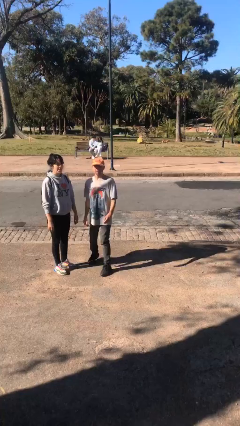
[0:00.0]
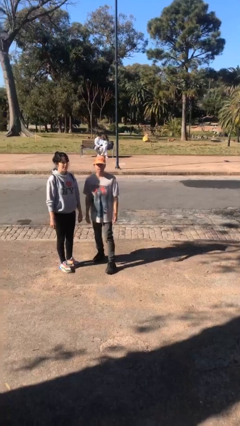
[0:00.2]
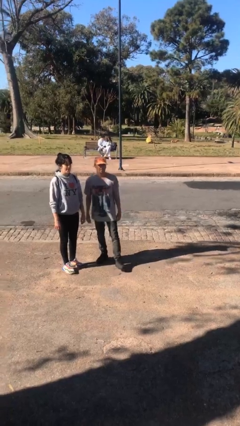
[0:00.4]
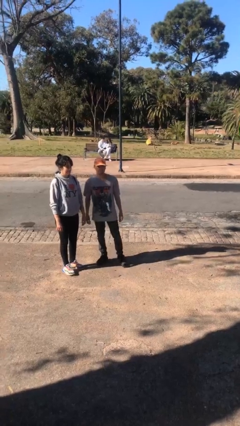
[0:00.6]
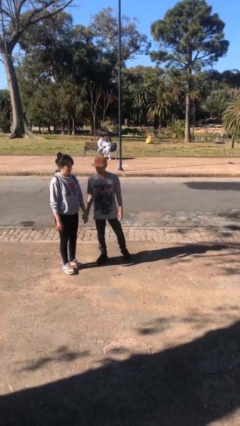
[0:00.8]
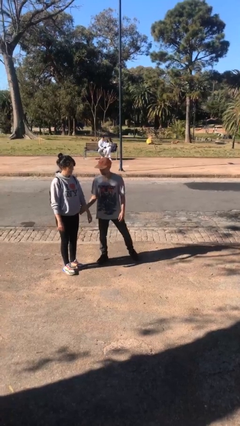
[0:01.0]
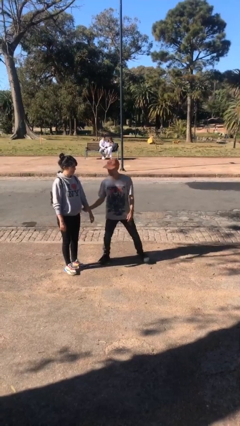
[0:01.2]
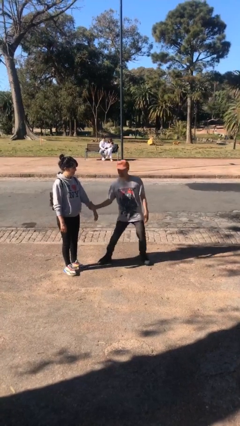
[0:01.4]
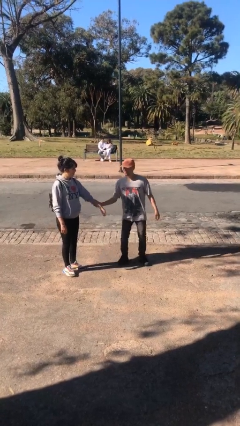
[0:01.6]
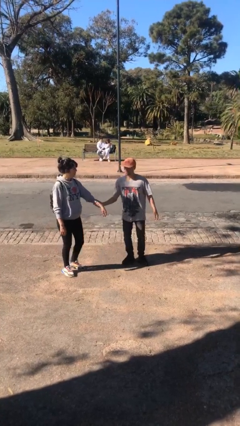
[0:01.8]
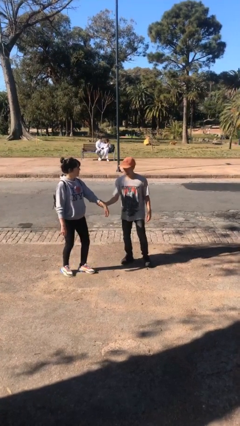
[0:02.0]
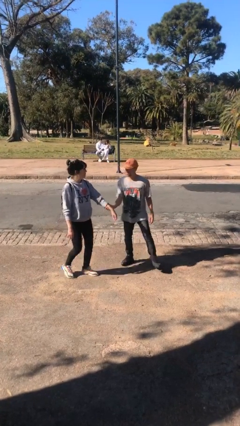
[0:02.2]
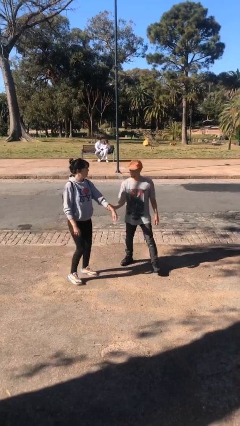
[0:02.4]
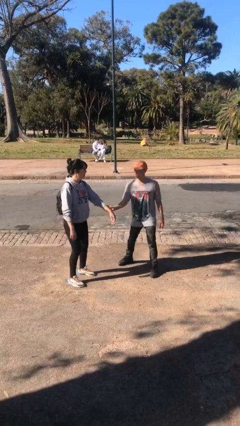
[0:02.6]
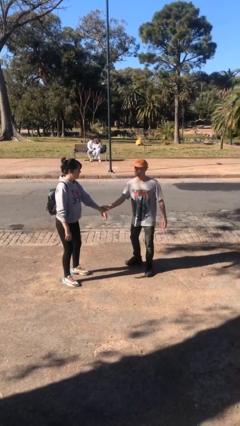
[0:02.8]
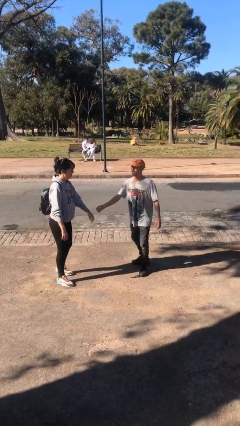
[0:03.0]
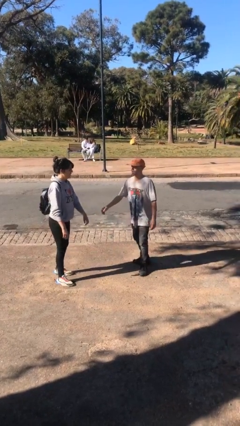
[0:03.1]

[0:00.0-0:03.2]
person grabs person by forearm

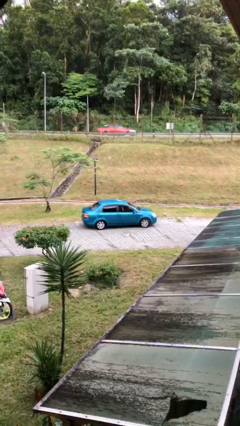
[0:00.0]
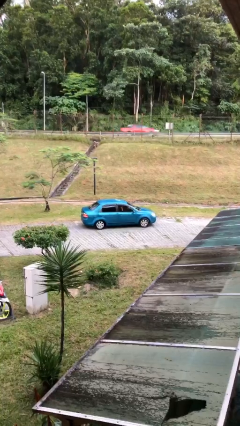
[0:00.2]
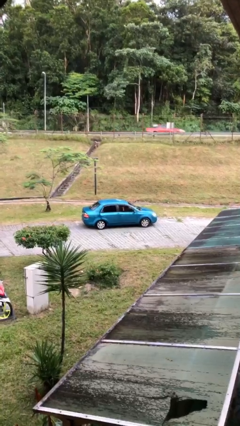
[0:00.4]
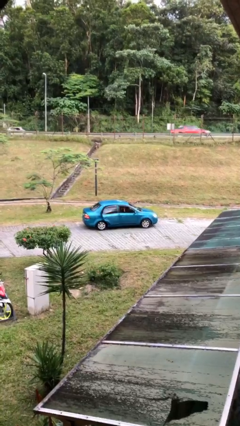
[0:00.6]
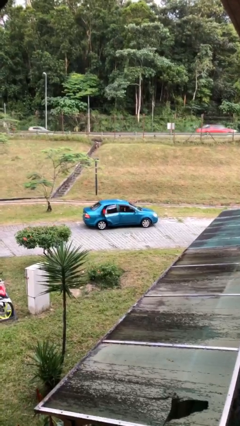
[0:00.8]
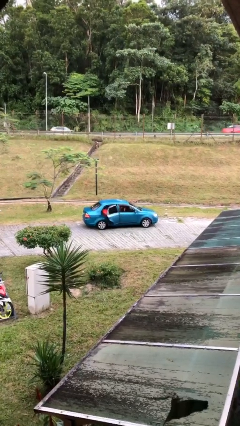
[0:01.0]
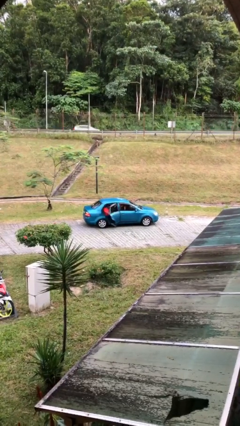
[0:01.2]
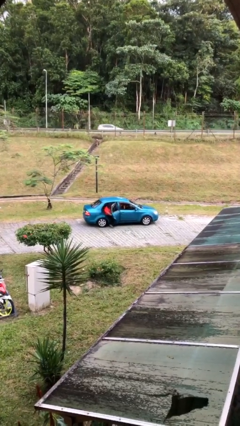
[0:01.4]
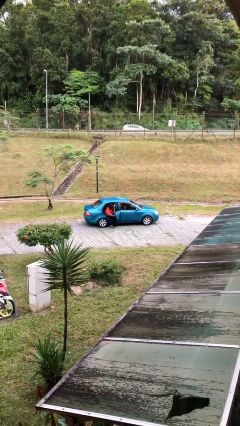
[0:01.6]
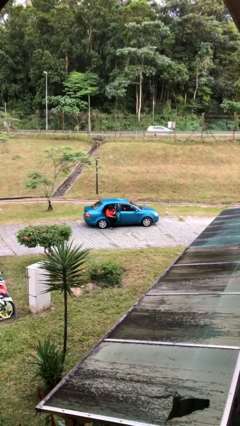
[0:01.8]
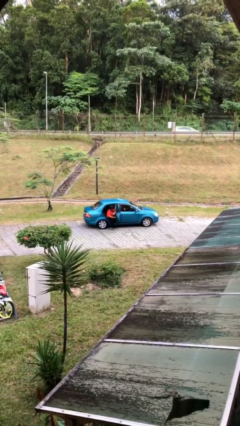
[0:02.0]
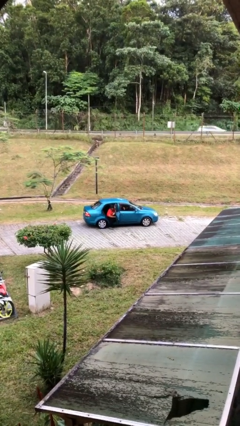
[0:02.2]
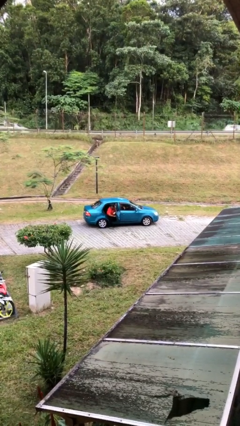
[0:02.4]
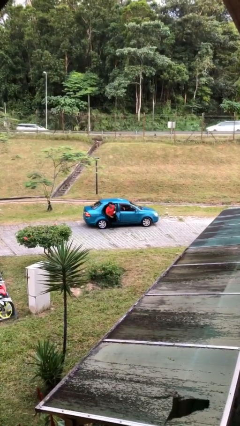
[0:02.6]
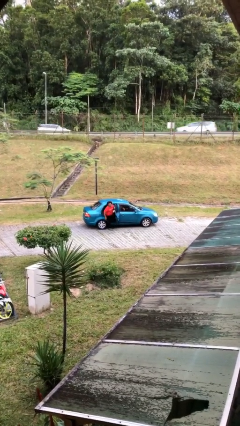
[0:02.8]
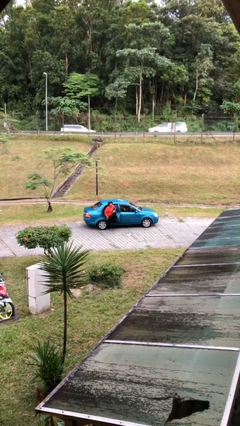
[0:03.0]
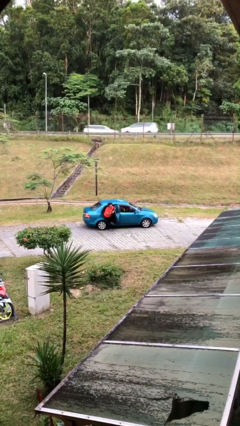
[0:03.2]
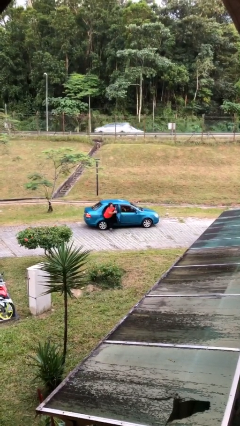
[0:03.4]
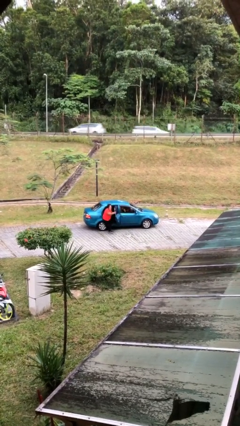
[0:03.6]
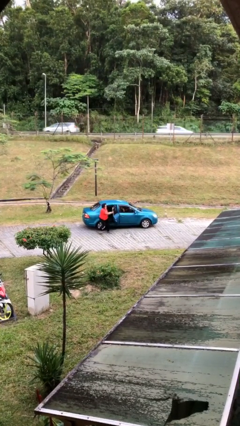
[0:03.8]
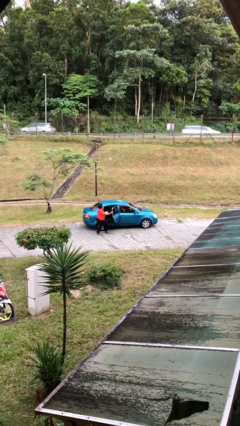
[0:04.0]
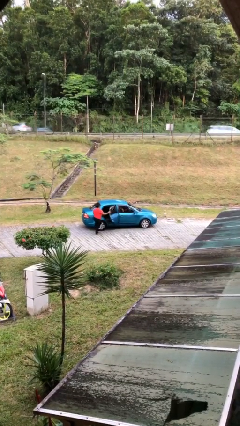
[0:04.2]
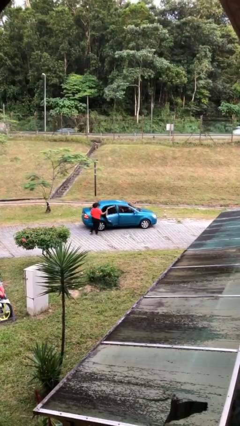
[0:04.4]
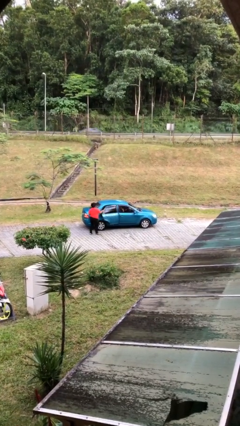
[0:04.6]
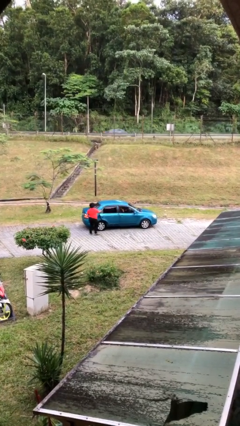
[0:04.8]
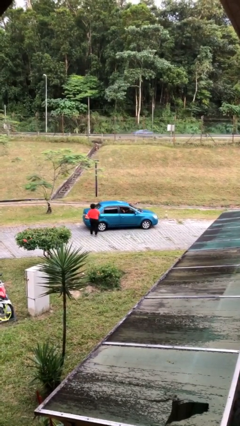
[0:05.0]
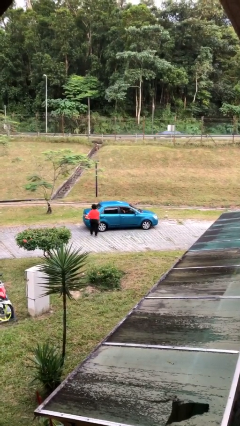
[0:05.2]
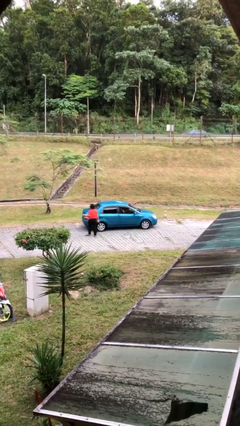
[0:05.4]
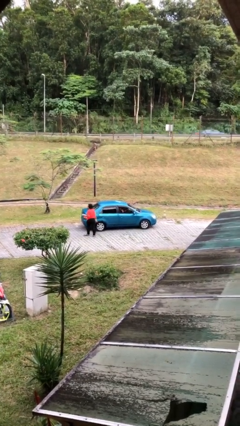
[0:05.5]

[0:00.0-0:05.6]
car drops off person

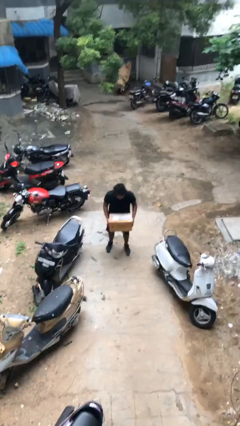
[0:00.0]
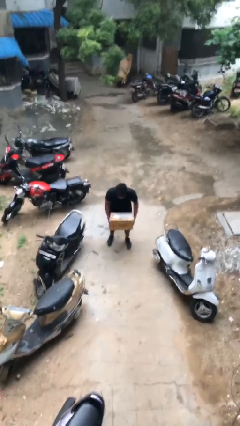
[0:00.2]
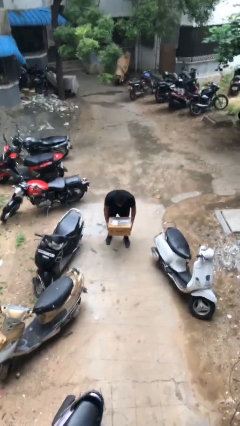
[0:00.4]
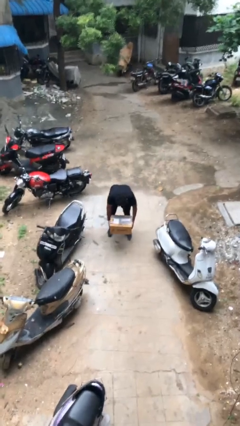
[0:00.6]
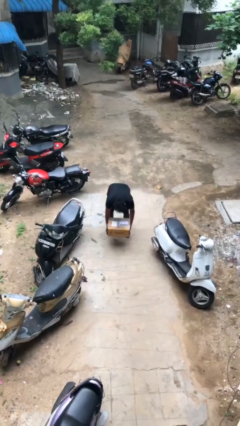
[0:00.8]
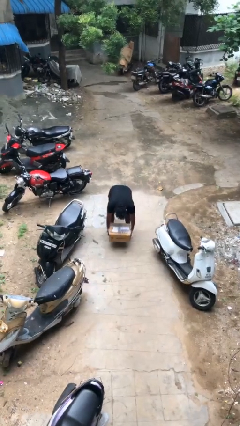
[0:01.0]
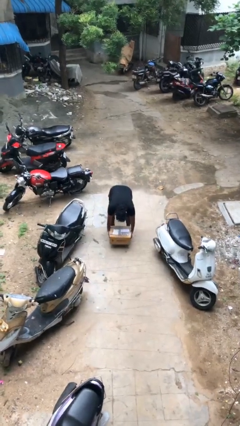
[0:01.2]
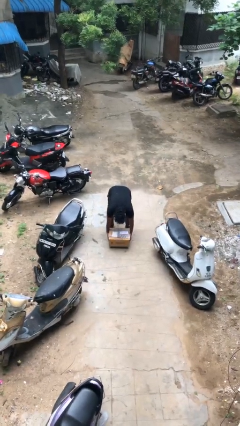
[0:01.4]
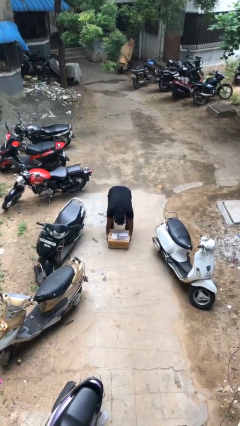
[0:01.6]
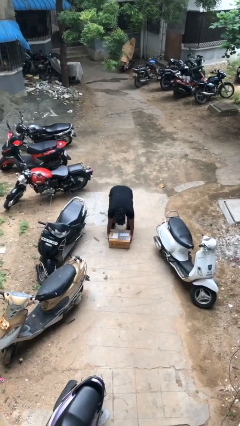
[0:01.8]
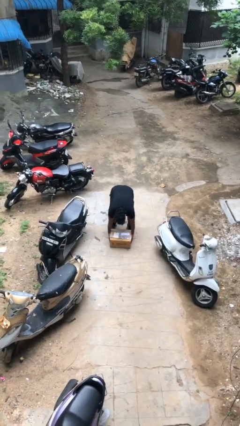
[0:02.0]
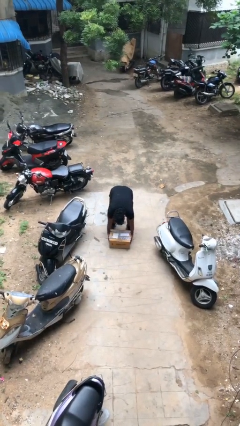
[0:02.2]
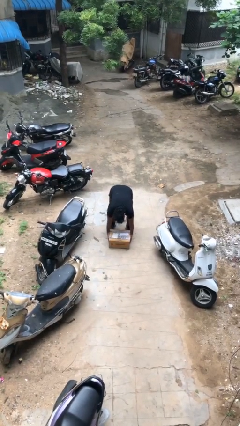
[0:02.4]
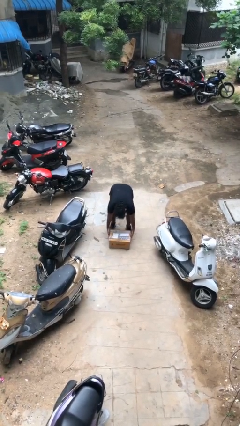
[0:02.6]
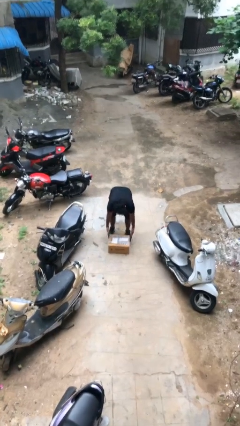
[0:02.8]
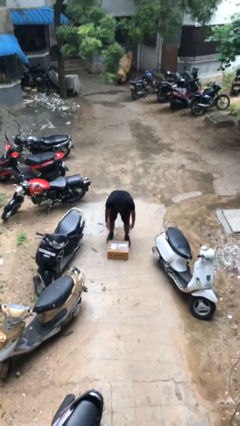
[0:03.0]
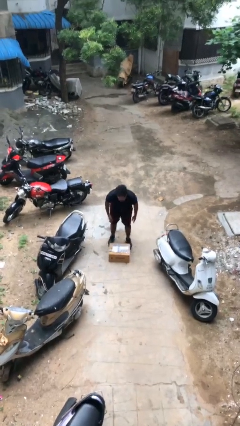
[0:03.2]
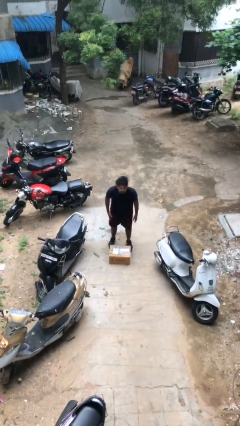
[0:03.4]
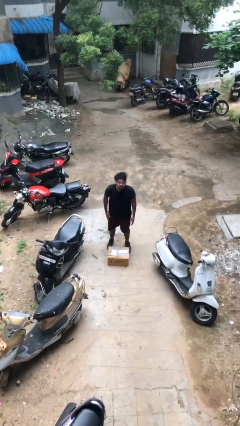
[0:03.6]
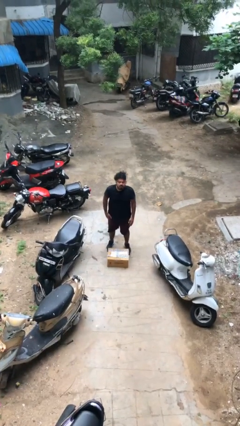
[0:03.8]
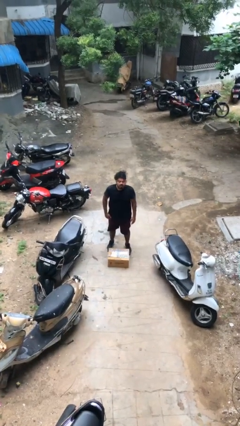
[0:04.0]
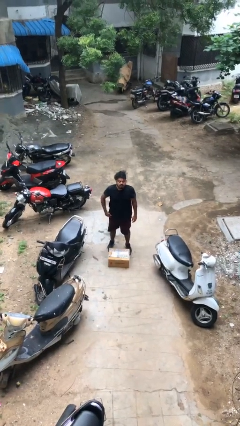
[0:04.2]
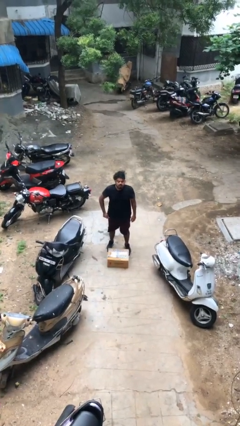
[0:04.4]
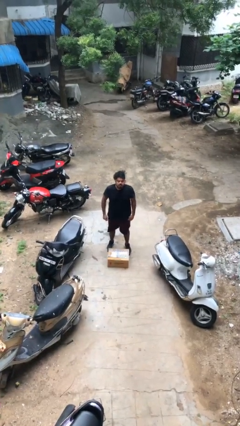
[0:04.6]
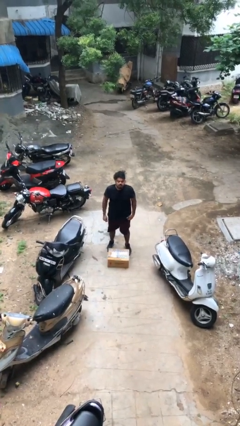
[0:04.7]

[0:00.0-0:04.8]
person puts down object on floor

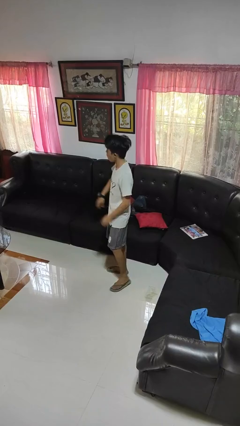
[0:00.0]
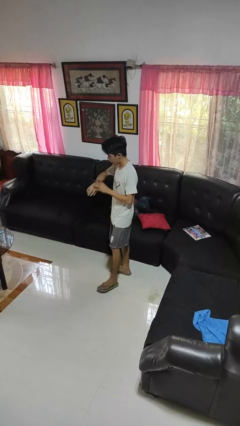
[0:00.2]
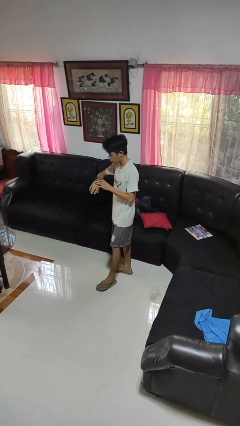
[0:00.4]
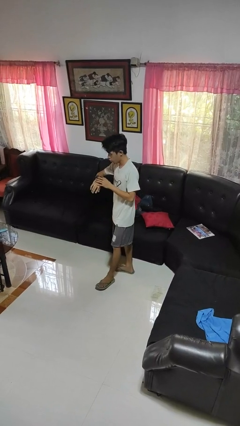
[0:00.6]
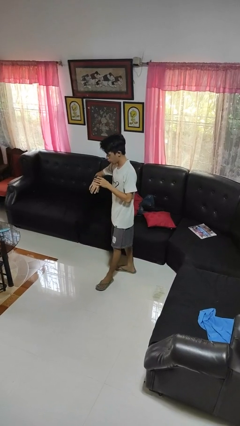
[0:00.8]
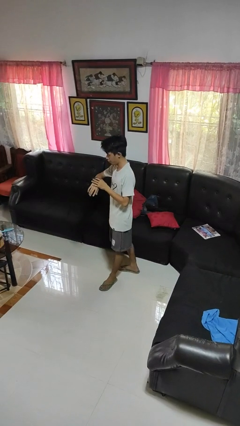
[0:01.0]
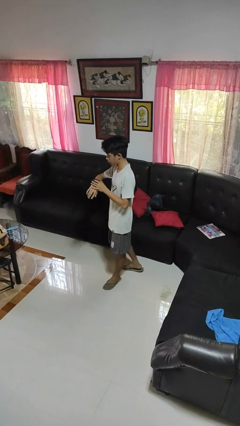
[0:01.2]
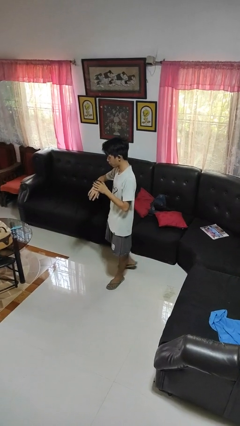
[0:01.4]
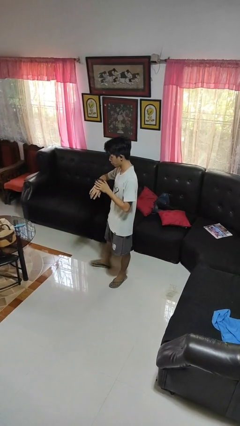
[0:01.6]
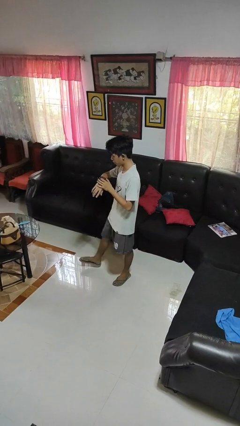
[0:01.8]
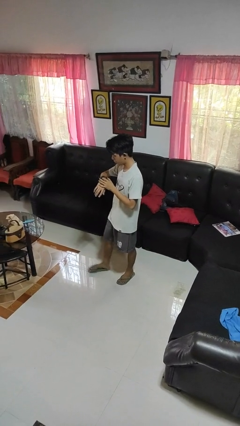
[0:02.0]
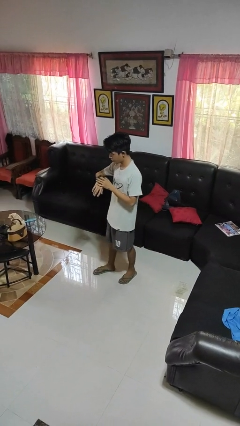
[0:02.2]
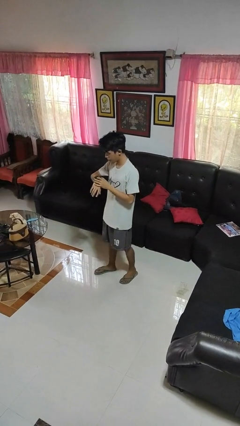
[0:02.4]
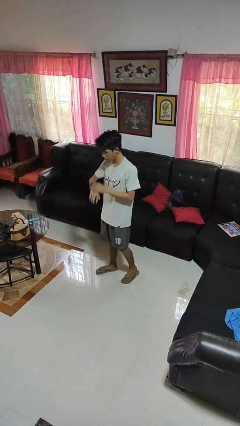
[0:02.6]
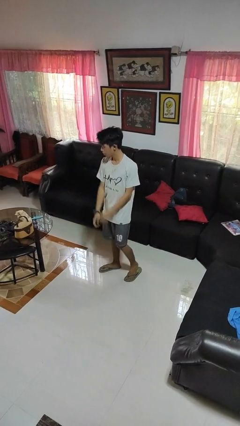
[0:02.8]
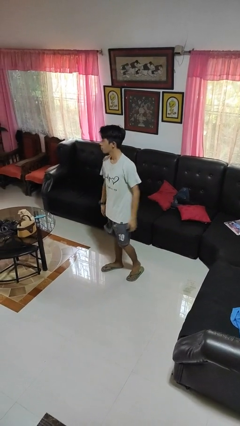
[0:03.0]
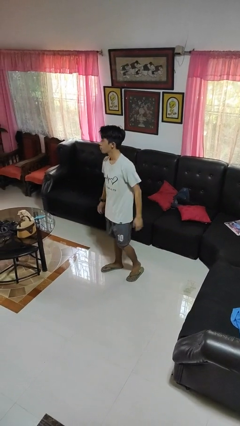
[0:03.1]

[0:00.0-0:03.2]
person looks at wristwatch

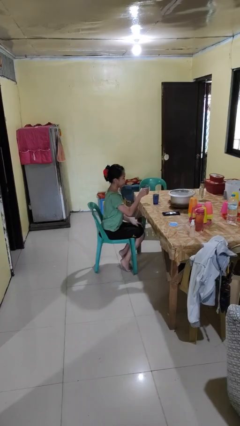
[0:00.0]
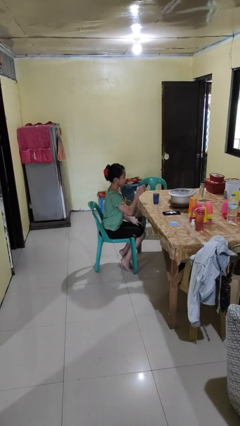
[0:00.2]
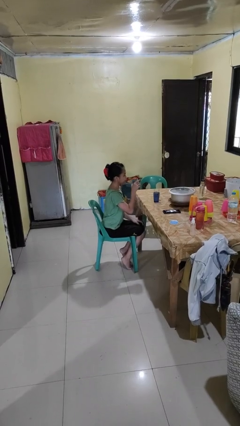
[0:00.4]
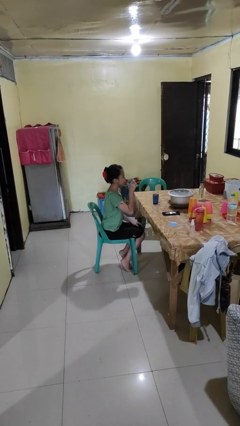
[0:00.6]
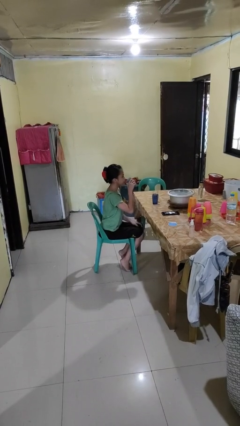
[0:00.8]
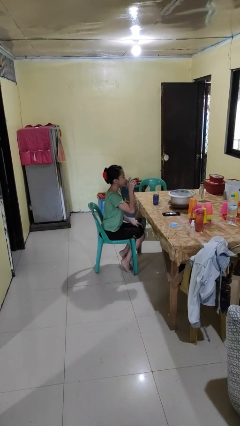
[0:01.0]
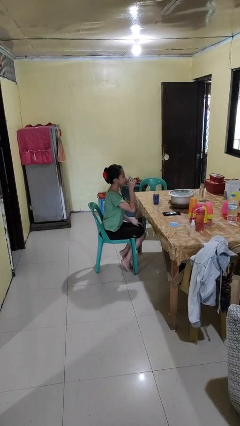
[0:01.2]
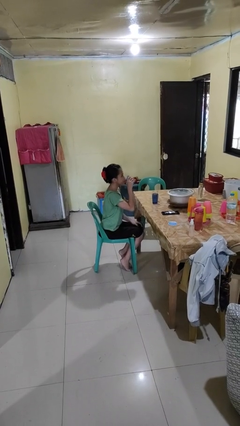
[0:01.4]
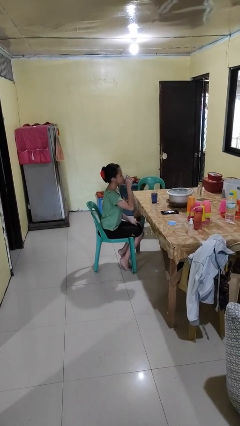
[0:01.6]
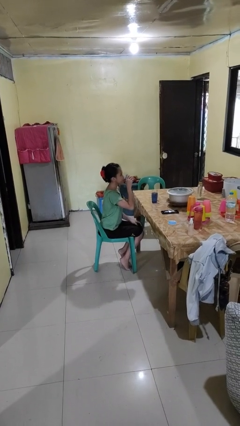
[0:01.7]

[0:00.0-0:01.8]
person drinks from shotglass
